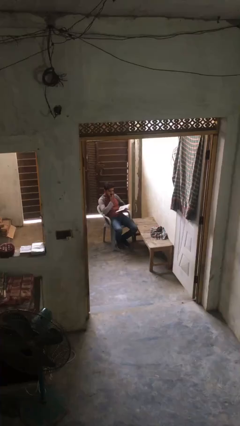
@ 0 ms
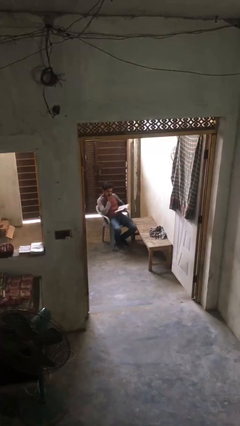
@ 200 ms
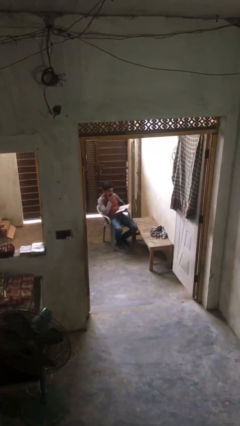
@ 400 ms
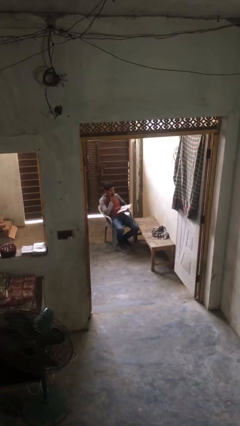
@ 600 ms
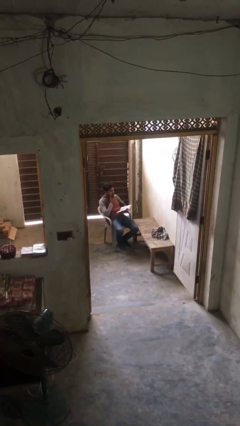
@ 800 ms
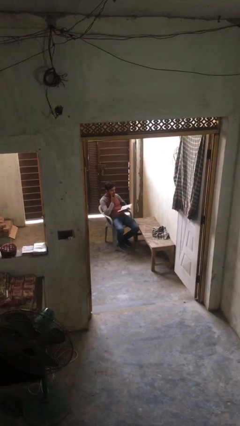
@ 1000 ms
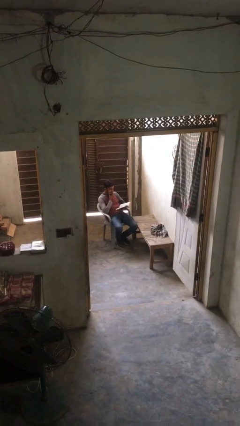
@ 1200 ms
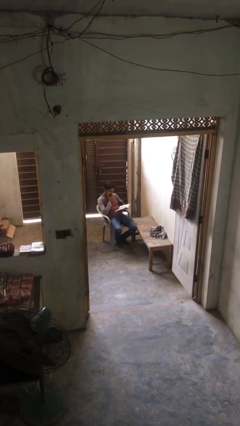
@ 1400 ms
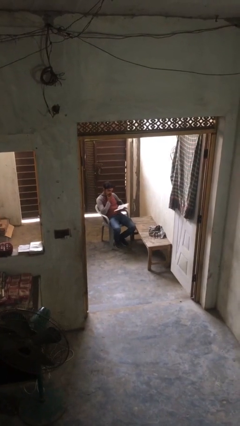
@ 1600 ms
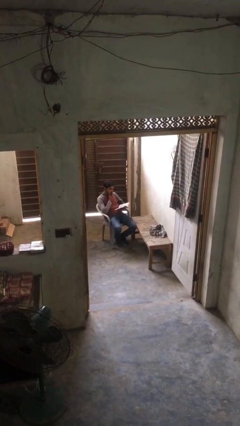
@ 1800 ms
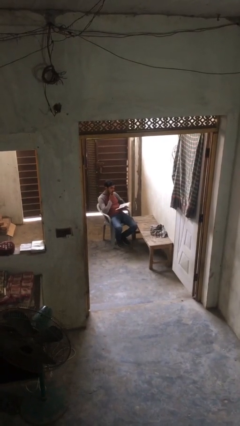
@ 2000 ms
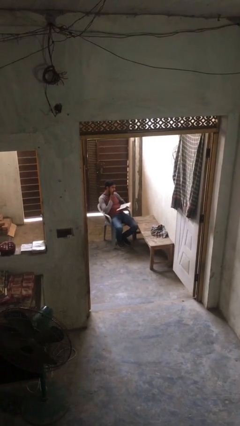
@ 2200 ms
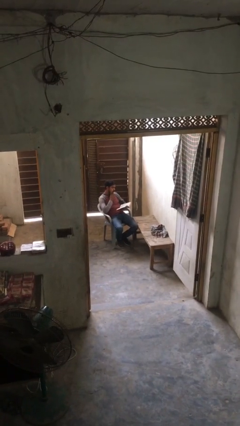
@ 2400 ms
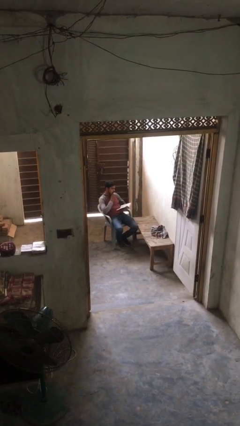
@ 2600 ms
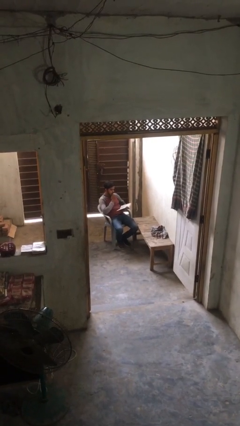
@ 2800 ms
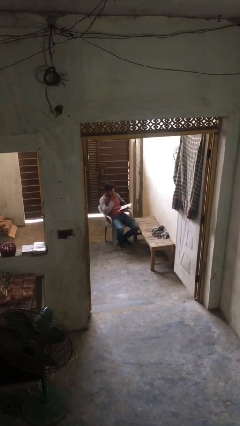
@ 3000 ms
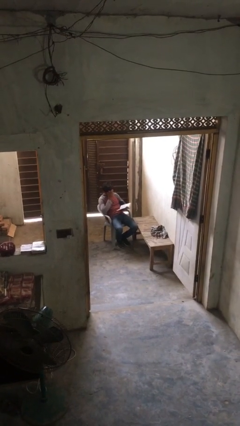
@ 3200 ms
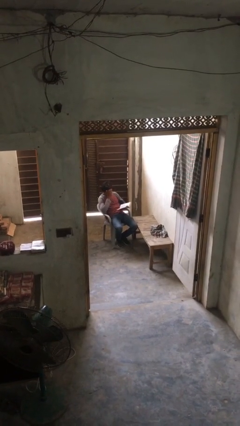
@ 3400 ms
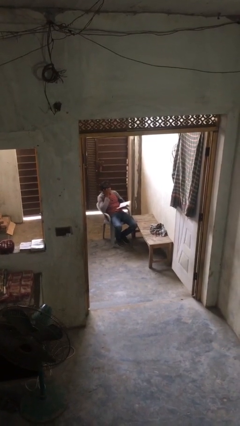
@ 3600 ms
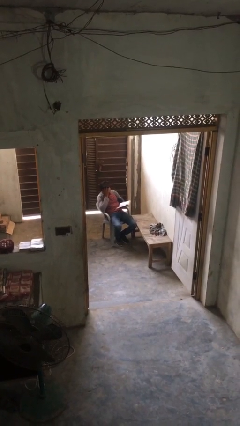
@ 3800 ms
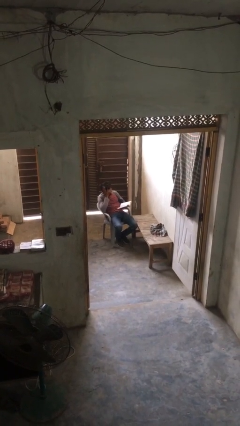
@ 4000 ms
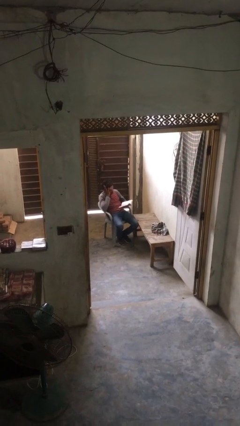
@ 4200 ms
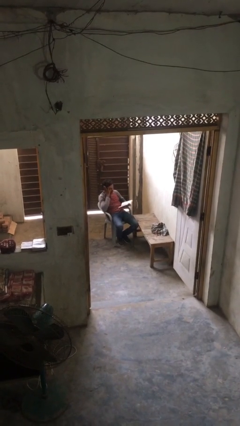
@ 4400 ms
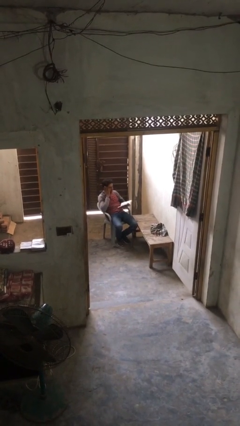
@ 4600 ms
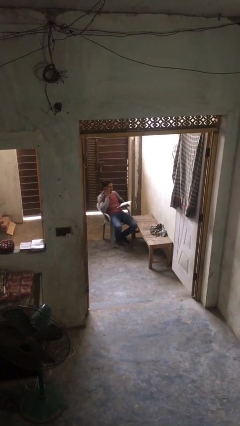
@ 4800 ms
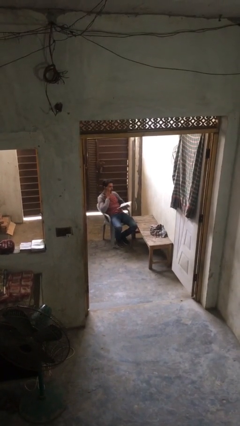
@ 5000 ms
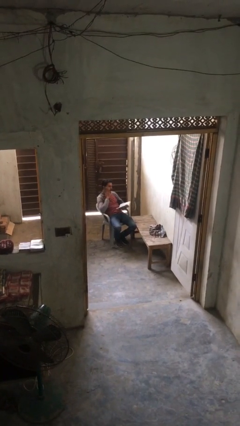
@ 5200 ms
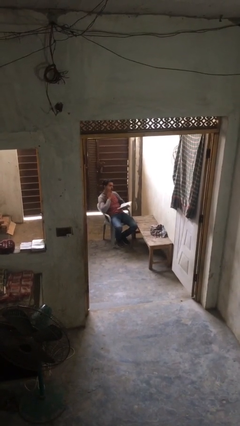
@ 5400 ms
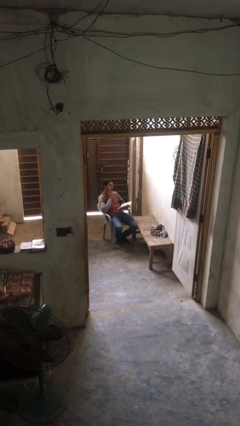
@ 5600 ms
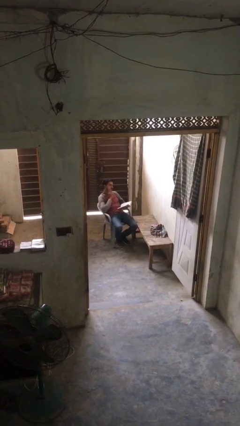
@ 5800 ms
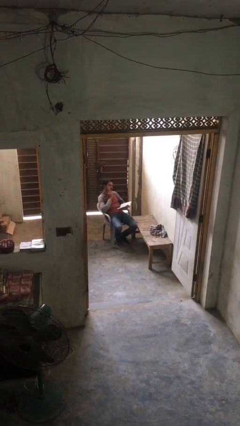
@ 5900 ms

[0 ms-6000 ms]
person reads document

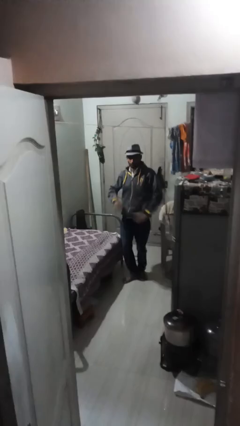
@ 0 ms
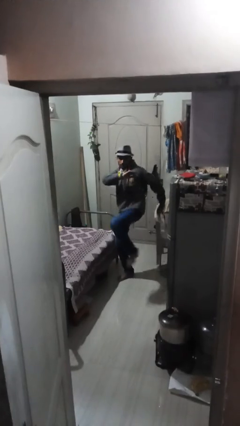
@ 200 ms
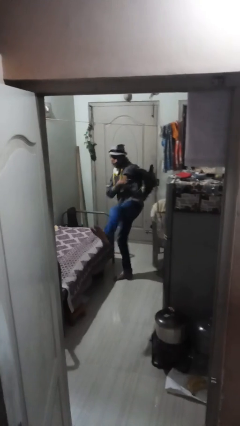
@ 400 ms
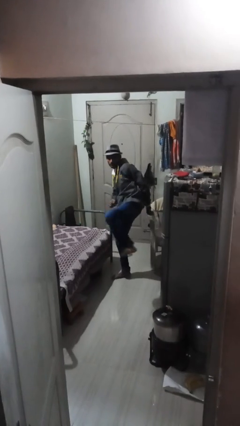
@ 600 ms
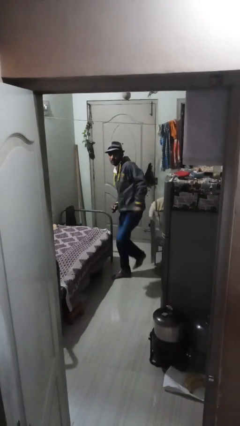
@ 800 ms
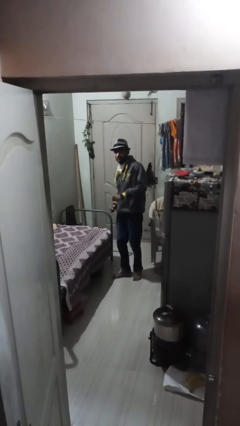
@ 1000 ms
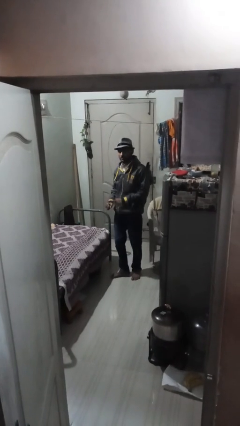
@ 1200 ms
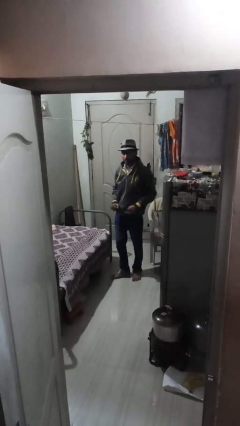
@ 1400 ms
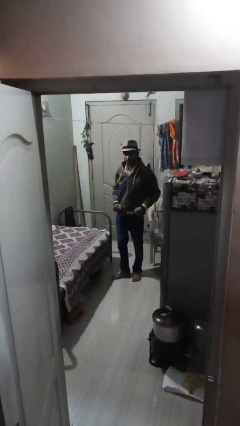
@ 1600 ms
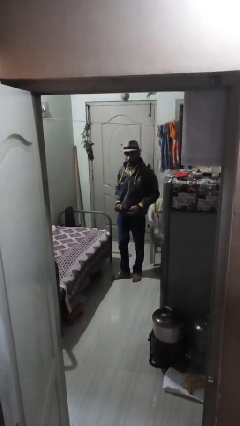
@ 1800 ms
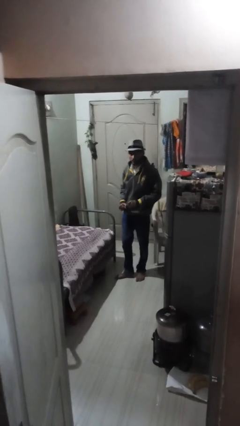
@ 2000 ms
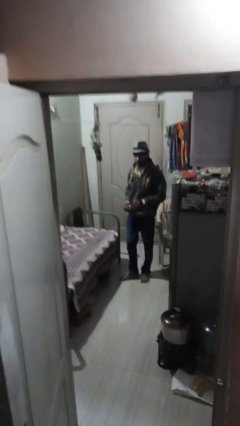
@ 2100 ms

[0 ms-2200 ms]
person karate kicks

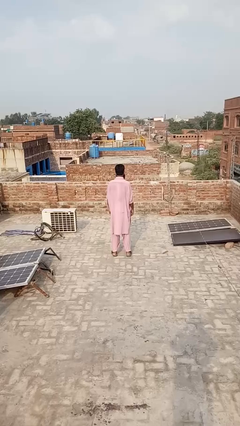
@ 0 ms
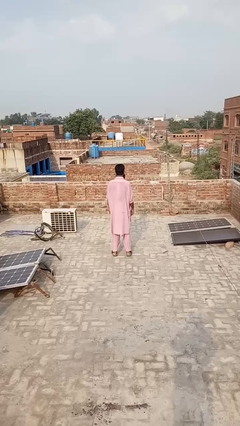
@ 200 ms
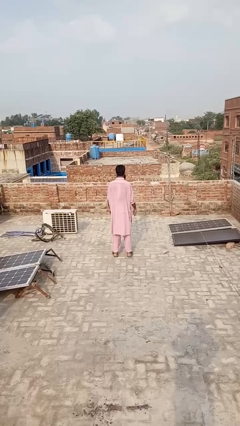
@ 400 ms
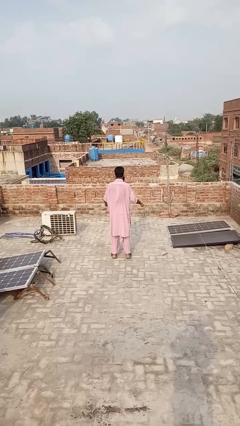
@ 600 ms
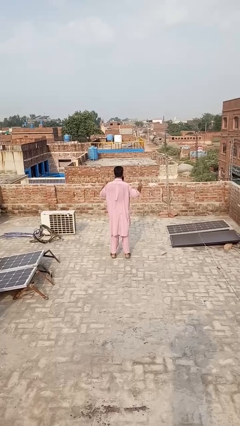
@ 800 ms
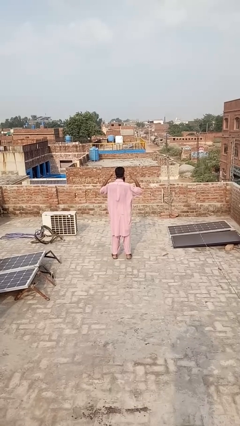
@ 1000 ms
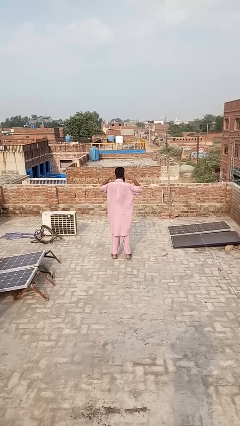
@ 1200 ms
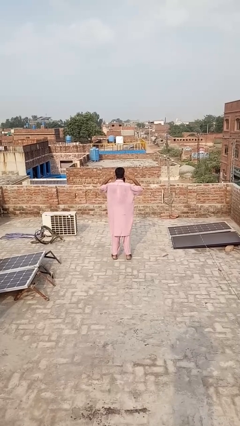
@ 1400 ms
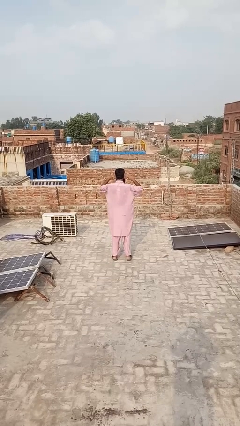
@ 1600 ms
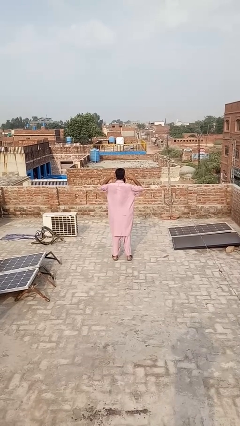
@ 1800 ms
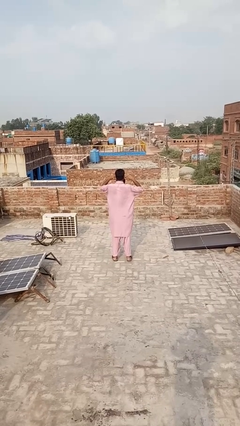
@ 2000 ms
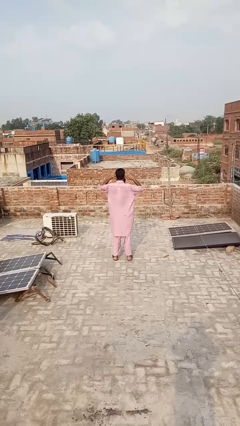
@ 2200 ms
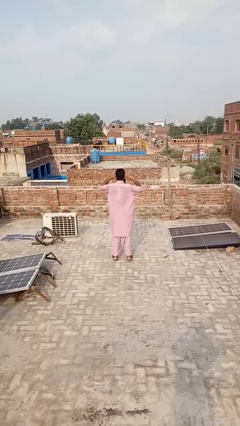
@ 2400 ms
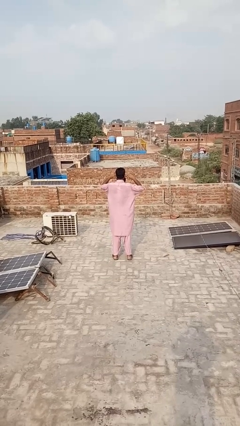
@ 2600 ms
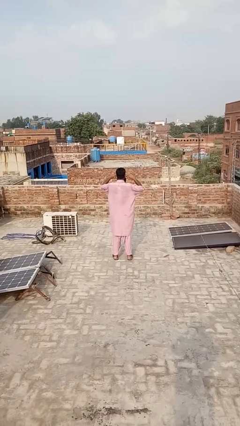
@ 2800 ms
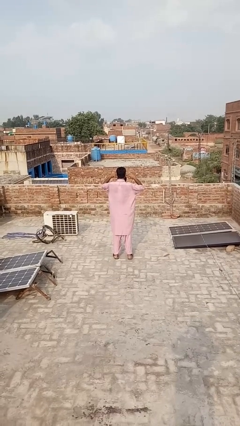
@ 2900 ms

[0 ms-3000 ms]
person puts fingers in ear

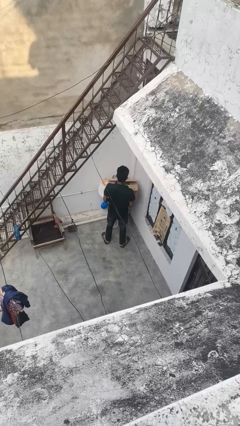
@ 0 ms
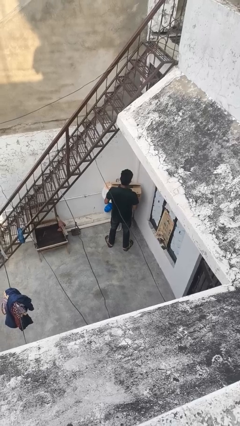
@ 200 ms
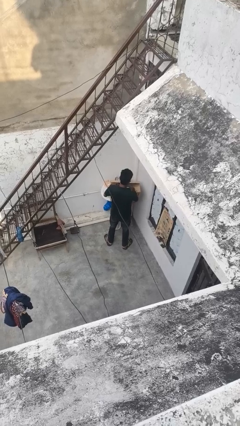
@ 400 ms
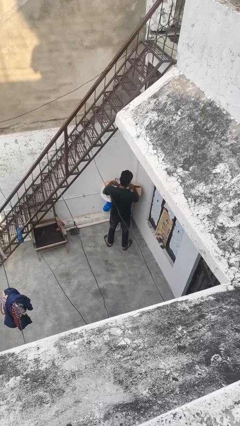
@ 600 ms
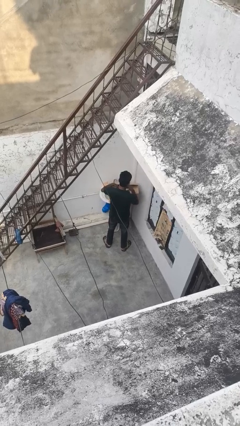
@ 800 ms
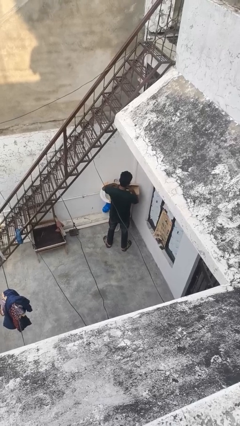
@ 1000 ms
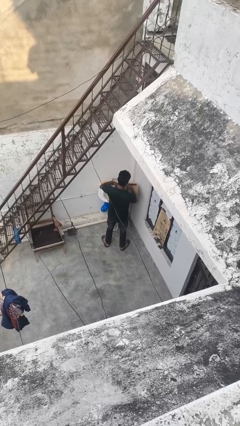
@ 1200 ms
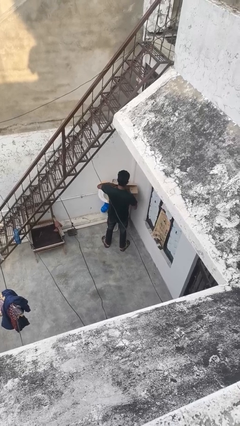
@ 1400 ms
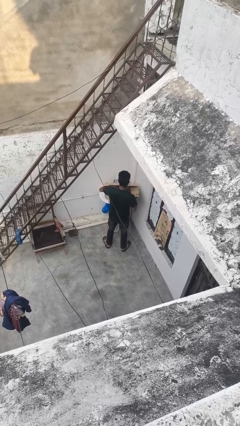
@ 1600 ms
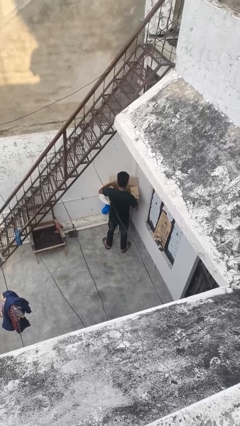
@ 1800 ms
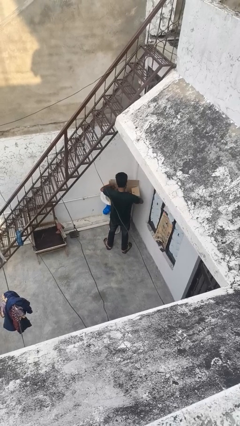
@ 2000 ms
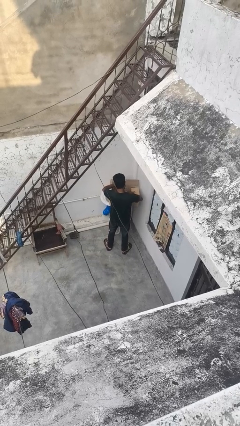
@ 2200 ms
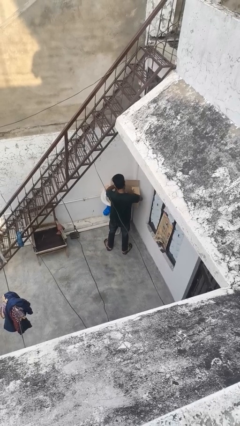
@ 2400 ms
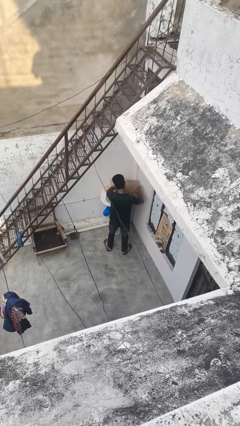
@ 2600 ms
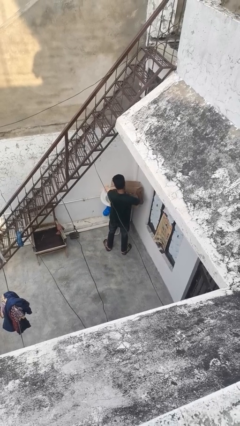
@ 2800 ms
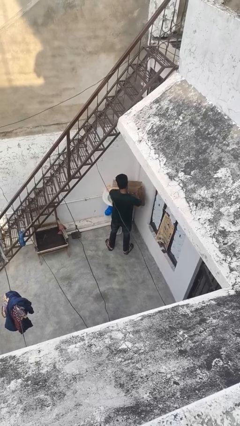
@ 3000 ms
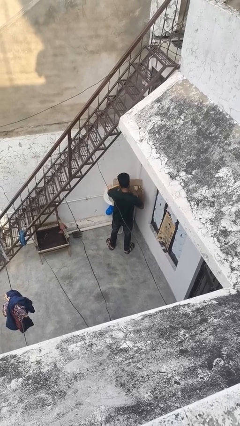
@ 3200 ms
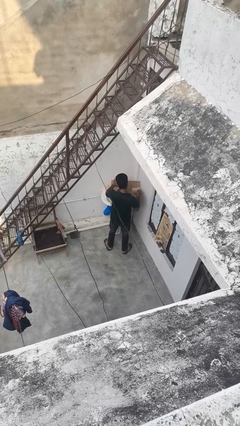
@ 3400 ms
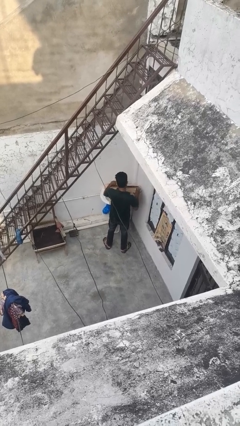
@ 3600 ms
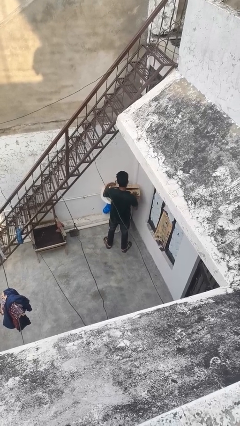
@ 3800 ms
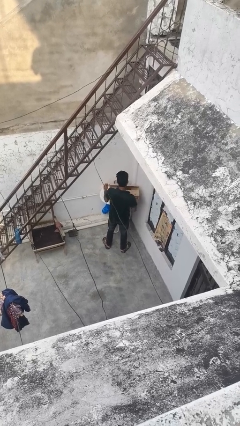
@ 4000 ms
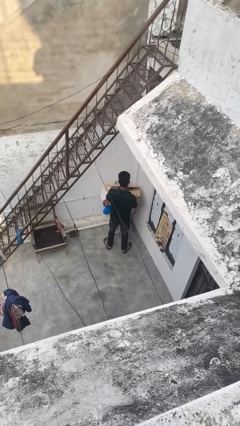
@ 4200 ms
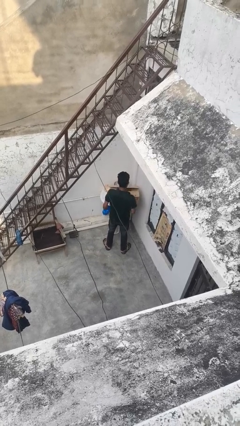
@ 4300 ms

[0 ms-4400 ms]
person searches in box

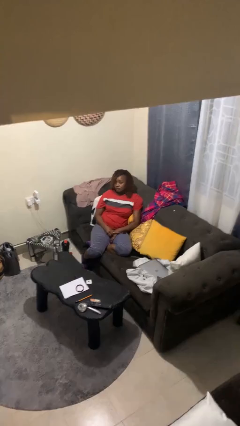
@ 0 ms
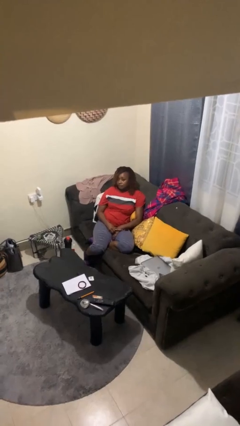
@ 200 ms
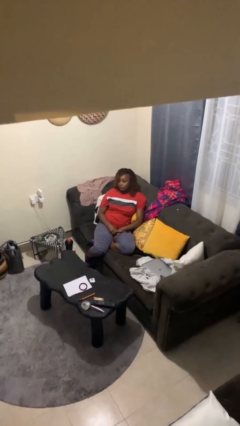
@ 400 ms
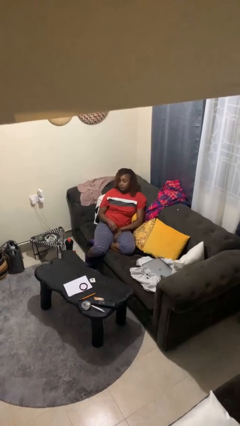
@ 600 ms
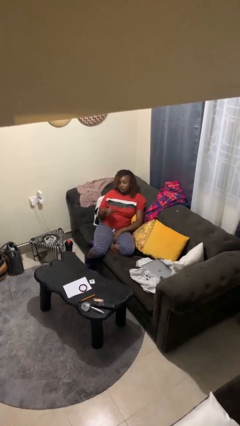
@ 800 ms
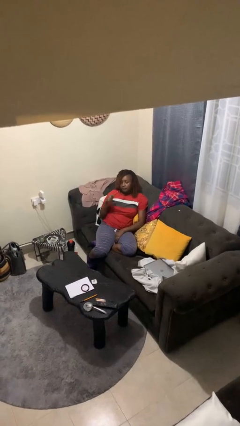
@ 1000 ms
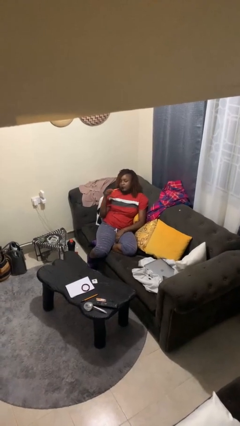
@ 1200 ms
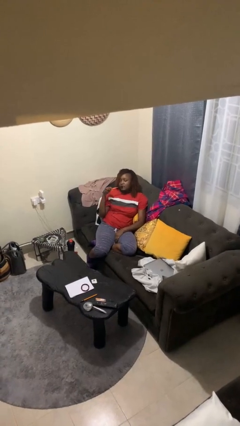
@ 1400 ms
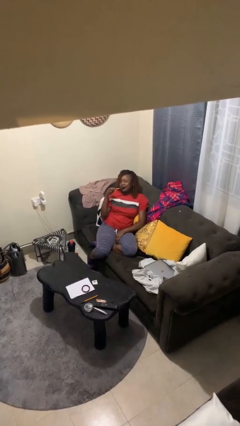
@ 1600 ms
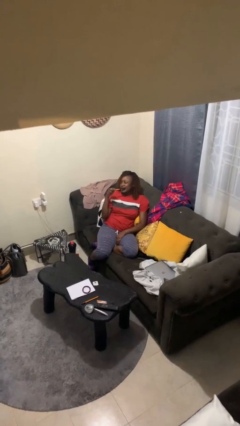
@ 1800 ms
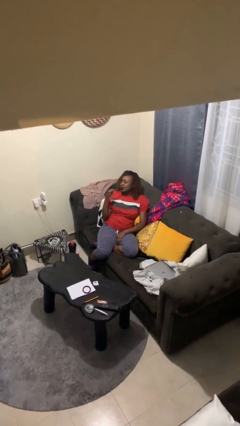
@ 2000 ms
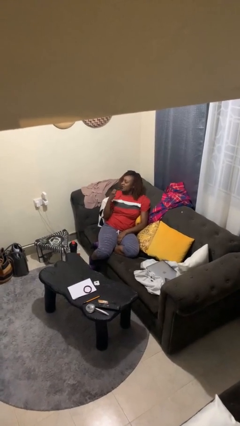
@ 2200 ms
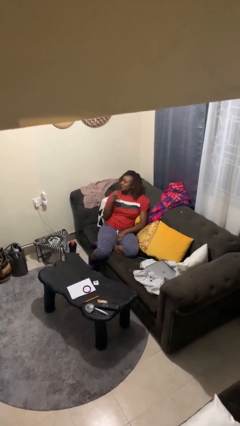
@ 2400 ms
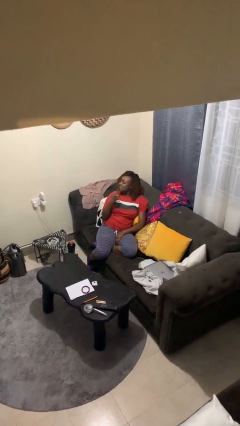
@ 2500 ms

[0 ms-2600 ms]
person brushes teeth
